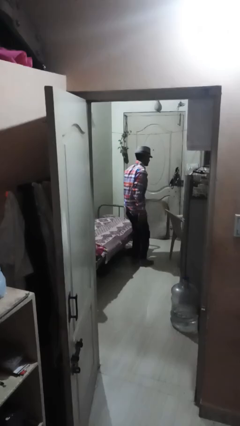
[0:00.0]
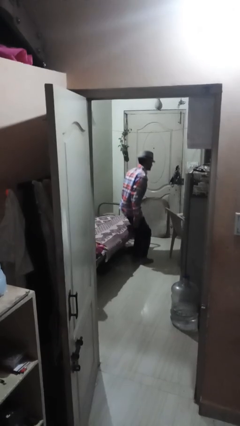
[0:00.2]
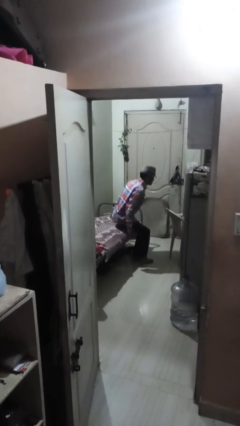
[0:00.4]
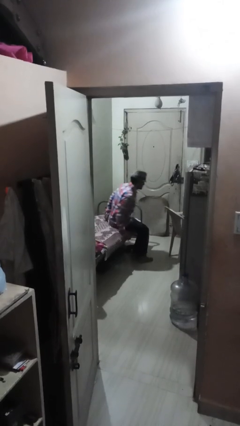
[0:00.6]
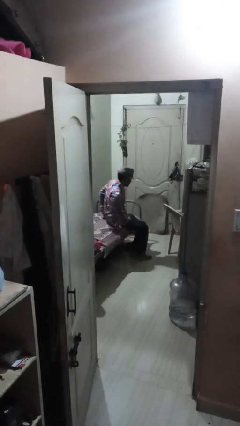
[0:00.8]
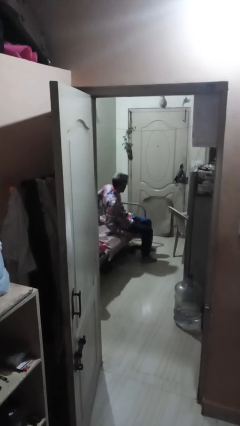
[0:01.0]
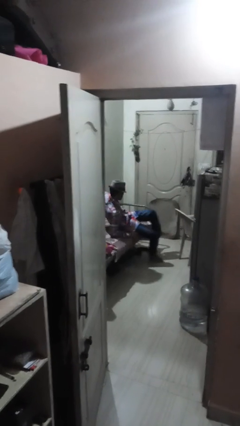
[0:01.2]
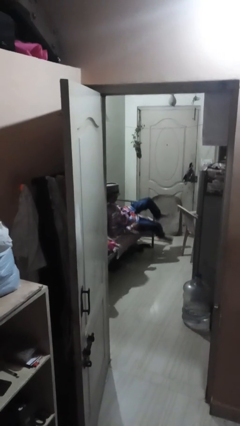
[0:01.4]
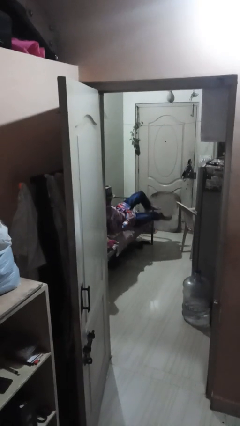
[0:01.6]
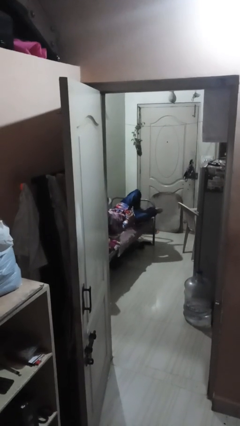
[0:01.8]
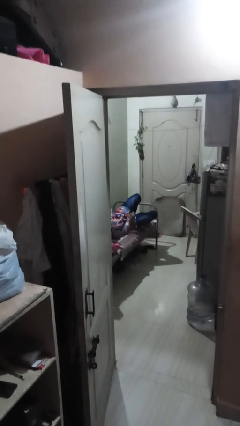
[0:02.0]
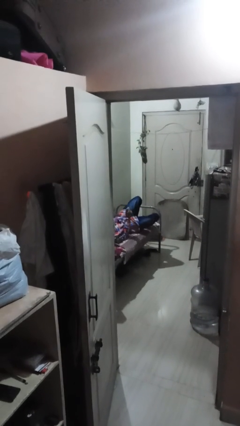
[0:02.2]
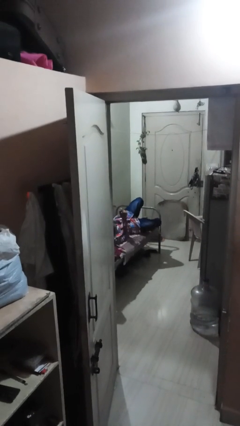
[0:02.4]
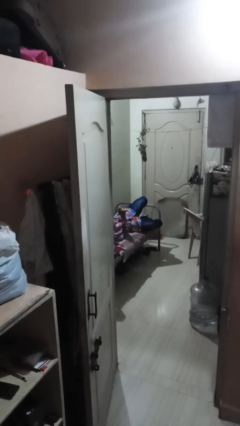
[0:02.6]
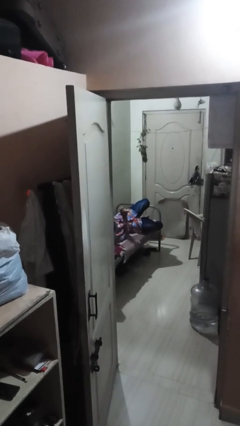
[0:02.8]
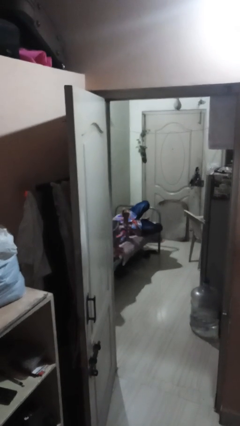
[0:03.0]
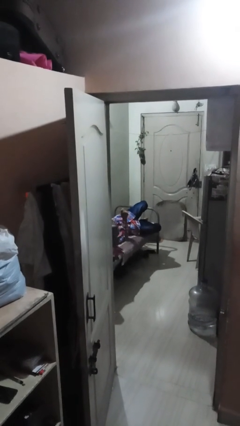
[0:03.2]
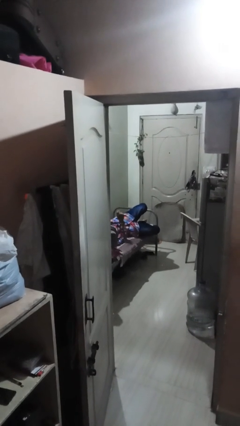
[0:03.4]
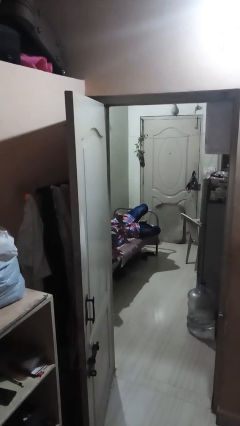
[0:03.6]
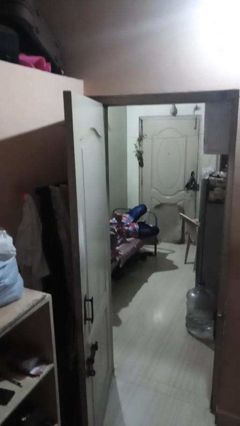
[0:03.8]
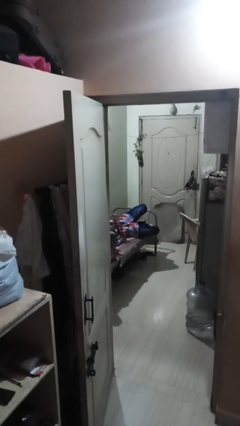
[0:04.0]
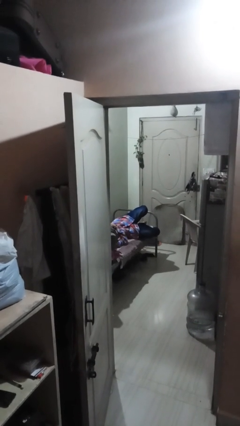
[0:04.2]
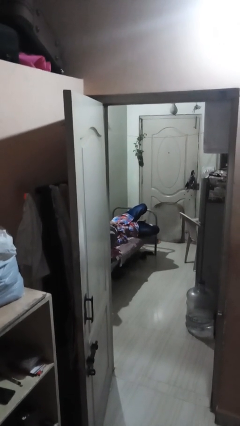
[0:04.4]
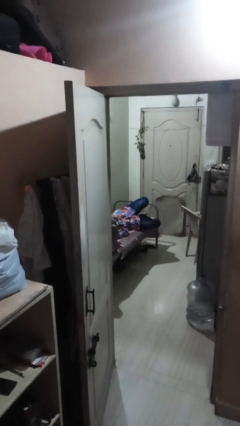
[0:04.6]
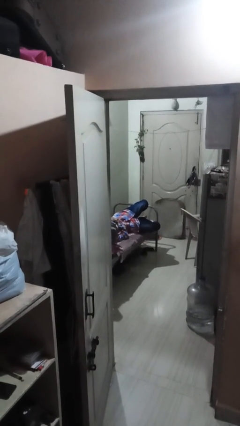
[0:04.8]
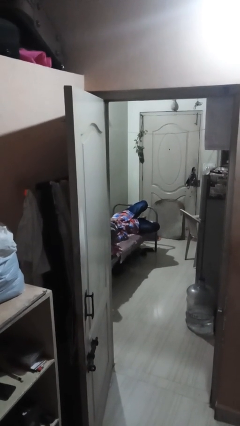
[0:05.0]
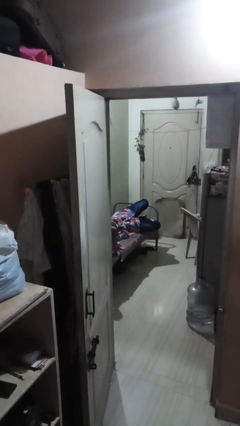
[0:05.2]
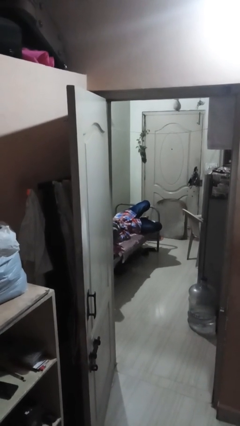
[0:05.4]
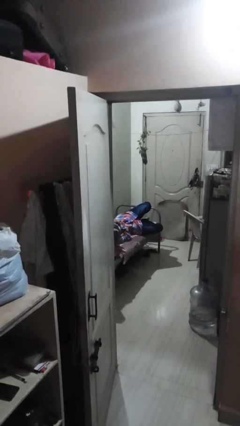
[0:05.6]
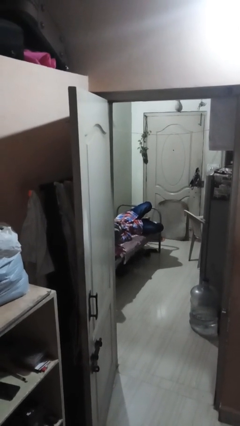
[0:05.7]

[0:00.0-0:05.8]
person lies down on bed

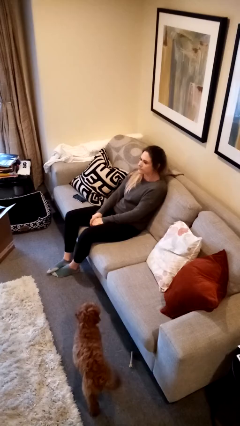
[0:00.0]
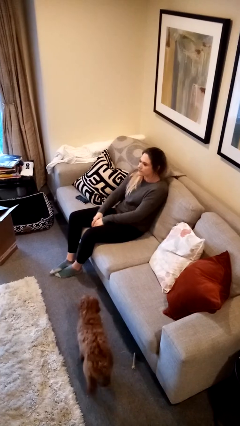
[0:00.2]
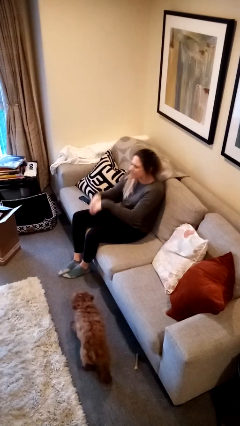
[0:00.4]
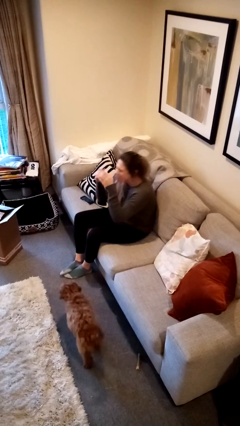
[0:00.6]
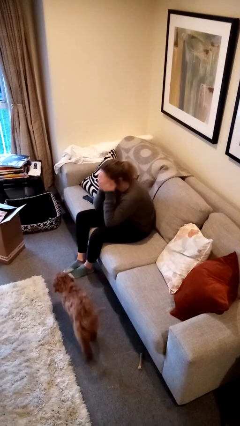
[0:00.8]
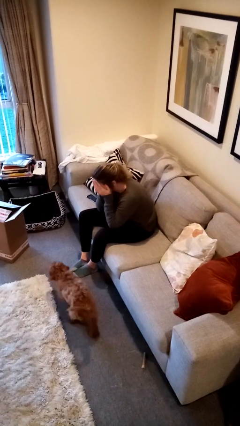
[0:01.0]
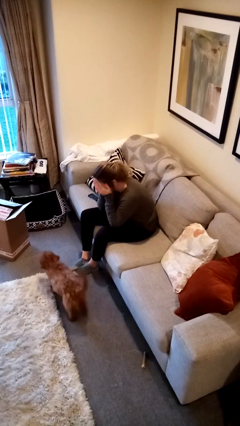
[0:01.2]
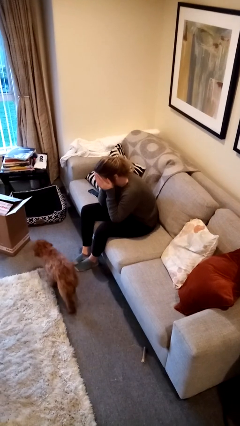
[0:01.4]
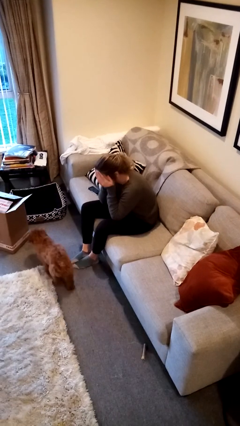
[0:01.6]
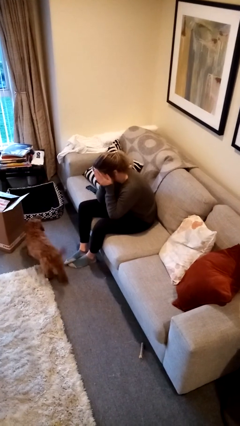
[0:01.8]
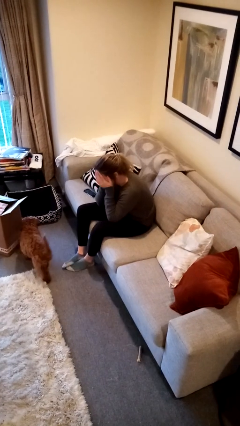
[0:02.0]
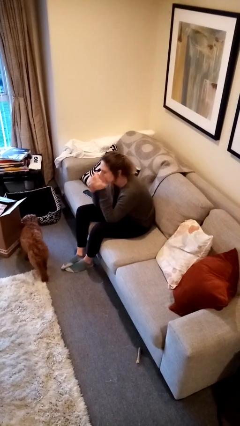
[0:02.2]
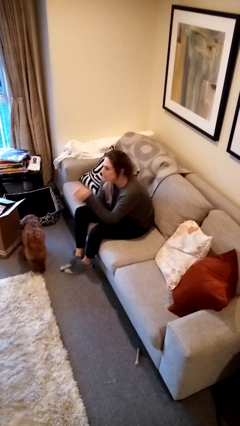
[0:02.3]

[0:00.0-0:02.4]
person covers face with hands

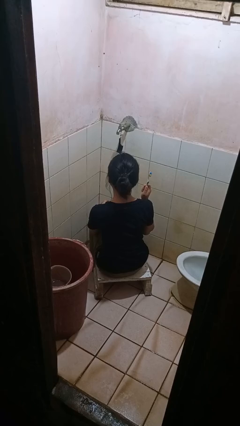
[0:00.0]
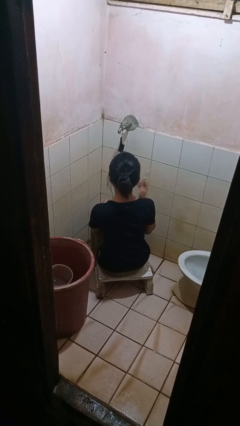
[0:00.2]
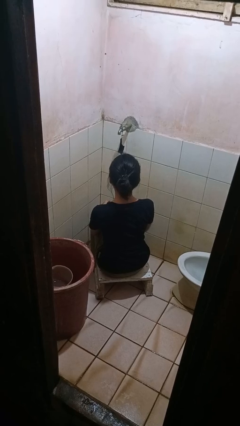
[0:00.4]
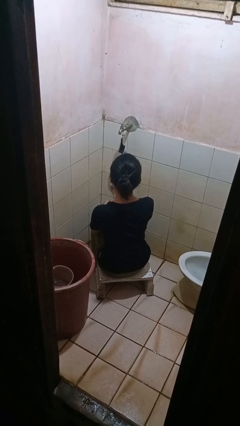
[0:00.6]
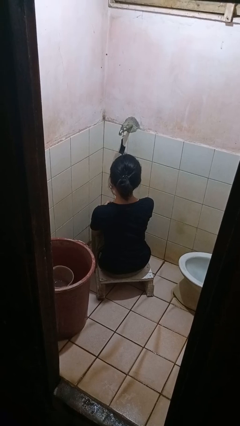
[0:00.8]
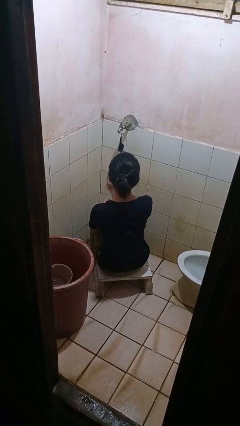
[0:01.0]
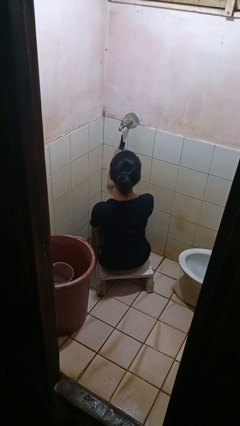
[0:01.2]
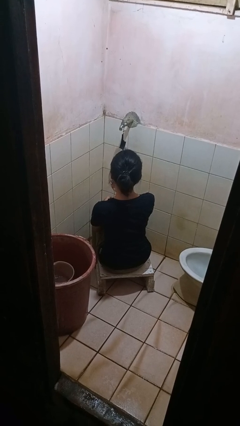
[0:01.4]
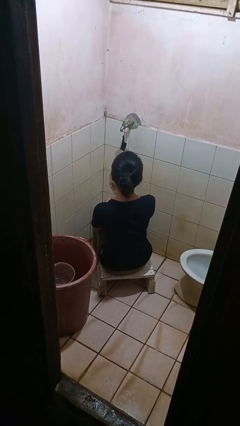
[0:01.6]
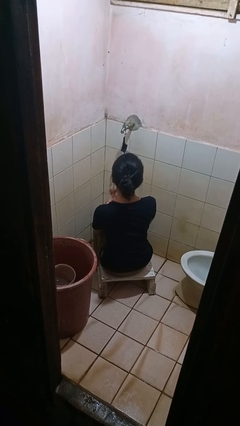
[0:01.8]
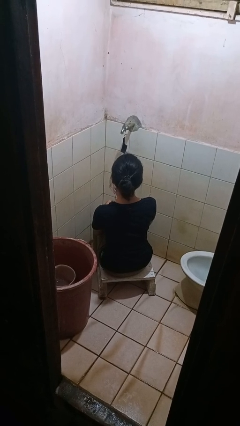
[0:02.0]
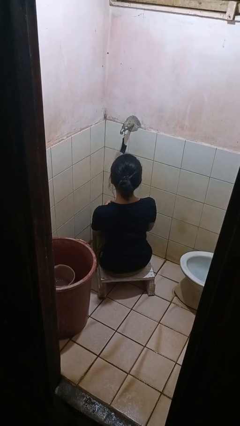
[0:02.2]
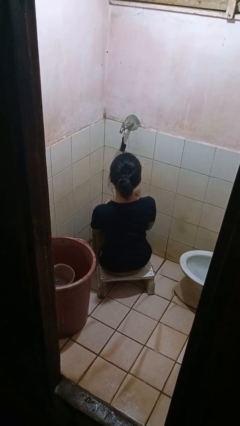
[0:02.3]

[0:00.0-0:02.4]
person brushes teeth

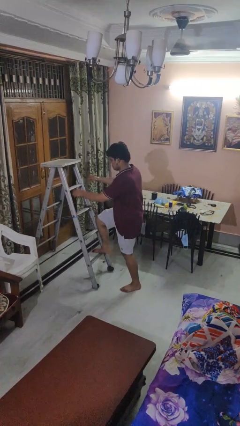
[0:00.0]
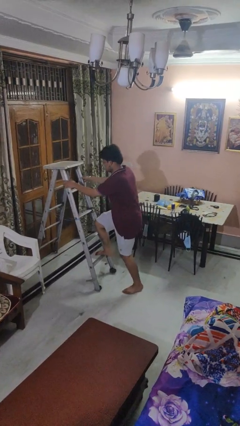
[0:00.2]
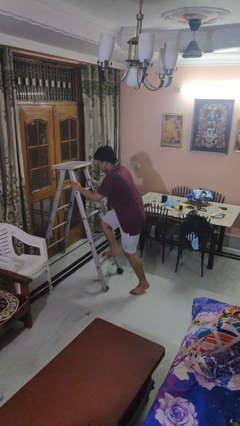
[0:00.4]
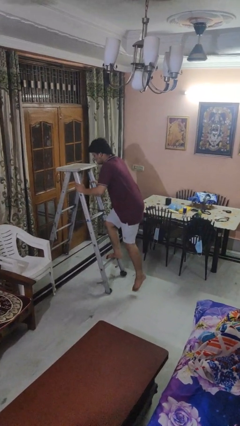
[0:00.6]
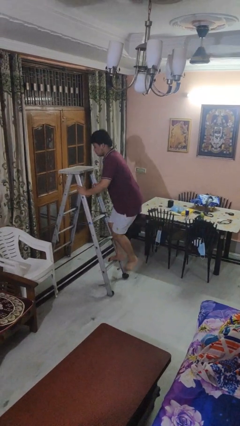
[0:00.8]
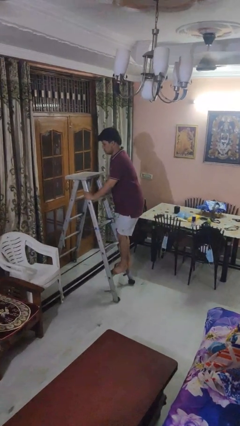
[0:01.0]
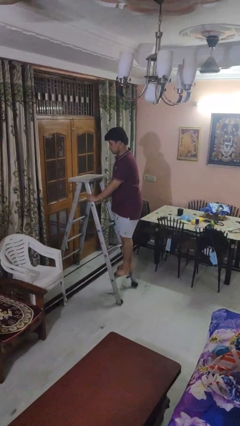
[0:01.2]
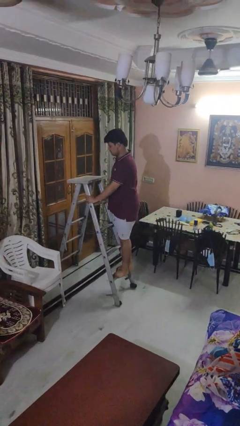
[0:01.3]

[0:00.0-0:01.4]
person climbs up ladder

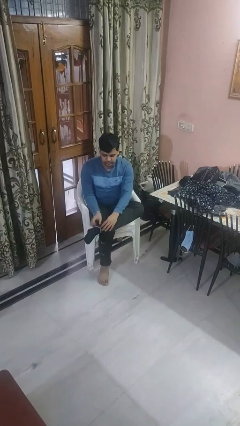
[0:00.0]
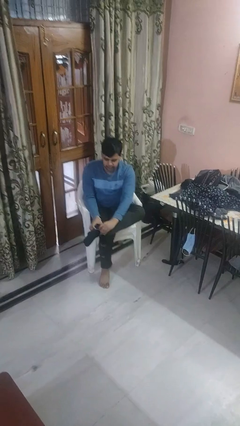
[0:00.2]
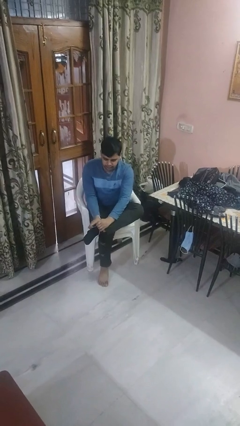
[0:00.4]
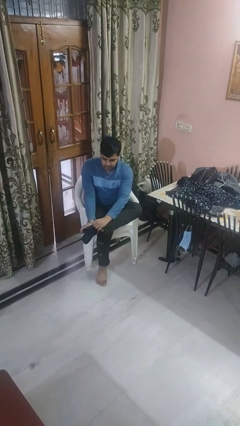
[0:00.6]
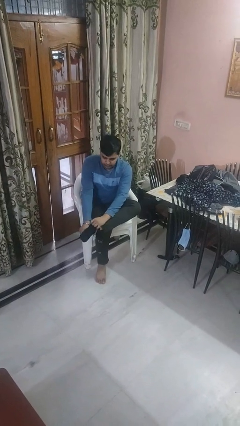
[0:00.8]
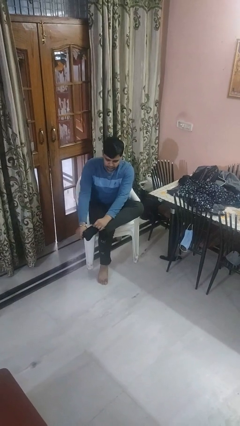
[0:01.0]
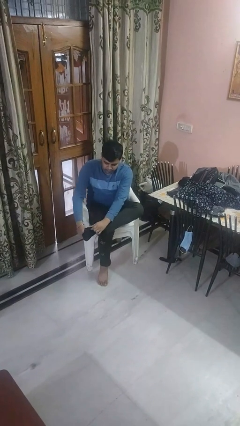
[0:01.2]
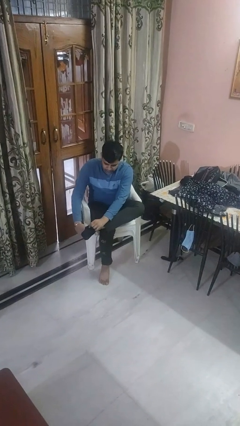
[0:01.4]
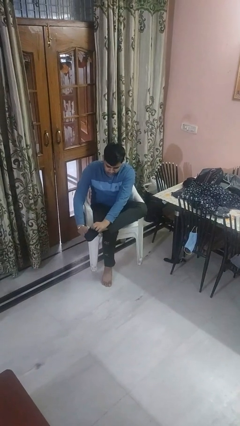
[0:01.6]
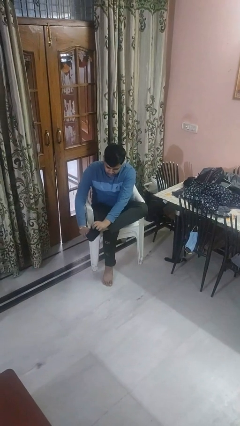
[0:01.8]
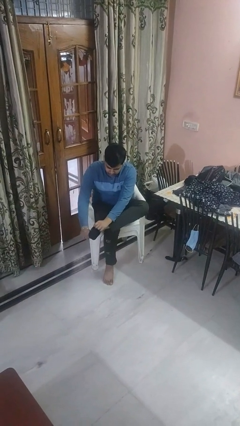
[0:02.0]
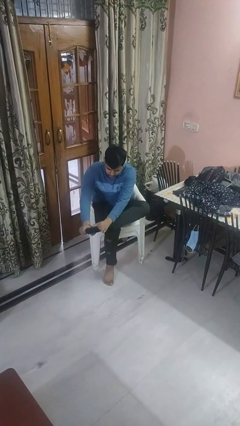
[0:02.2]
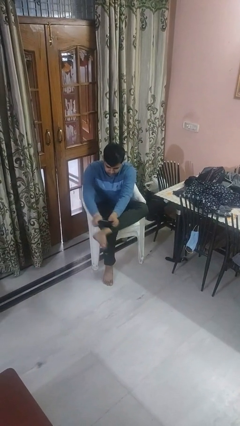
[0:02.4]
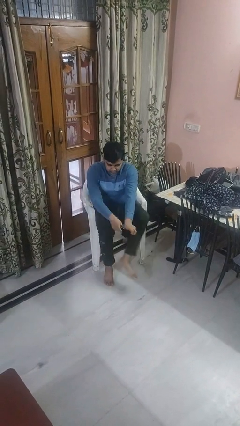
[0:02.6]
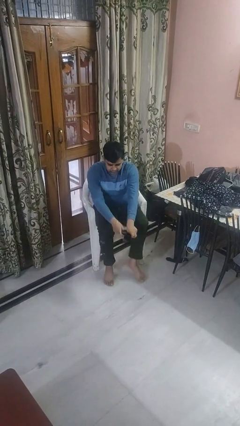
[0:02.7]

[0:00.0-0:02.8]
person takes off socks

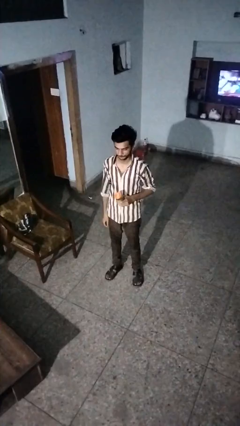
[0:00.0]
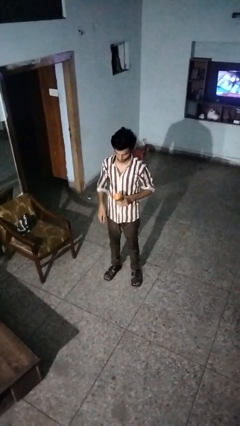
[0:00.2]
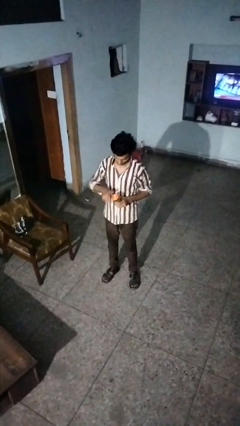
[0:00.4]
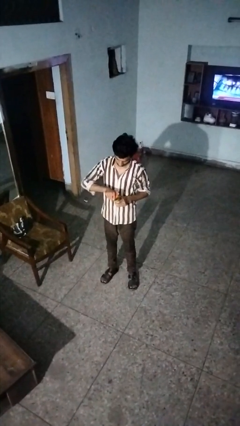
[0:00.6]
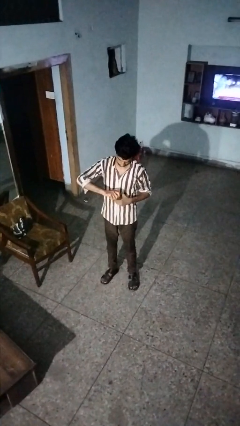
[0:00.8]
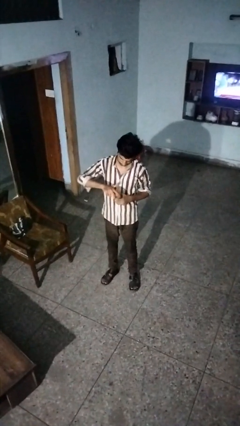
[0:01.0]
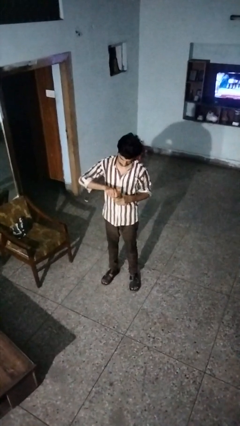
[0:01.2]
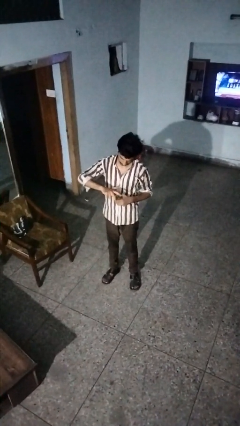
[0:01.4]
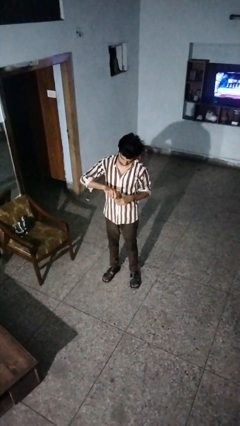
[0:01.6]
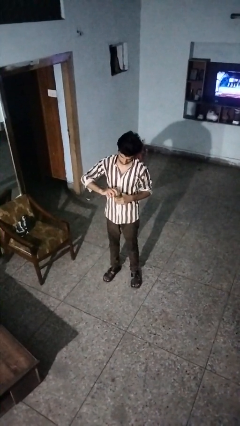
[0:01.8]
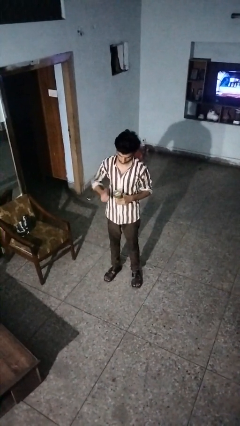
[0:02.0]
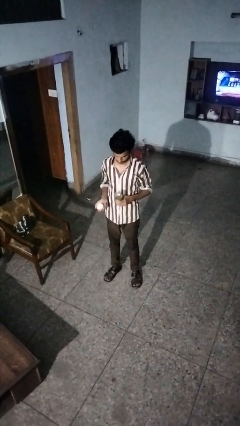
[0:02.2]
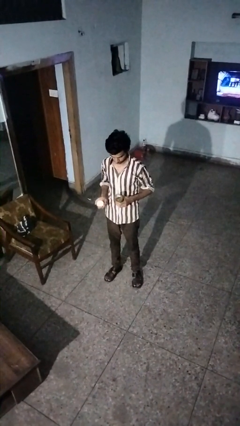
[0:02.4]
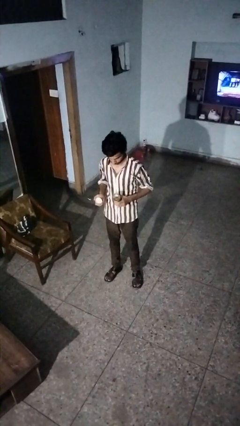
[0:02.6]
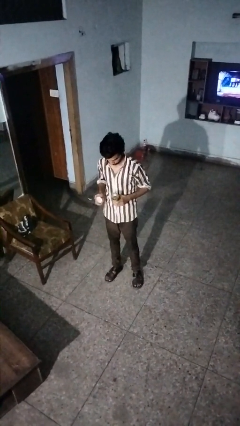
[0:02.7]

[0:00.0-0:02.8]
person opens jar
